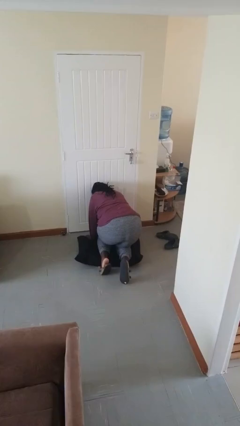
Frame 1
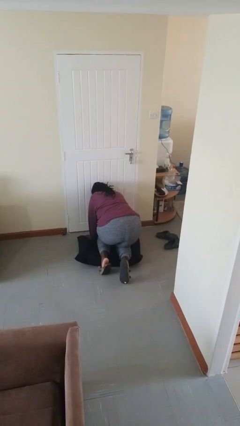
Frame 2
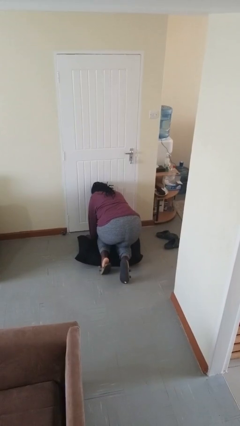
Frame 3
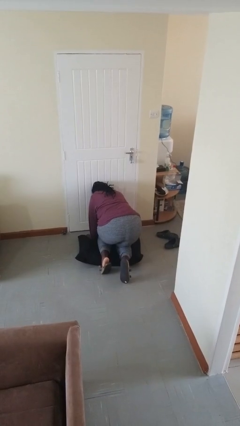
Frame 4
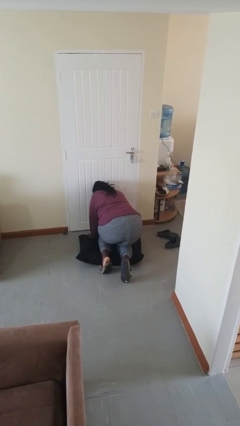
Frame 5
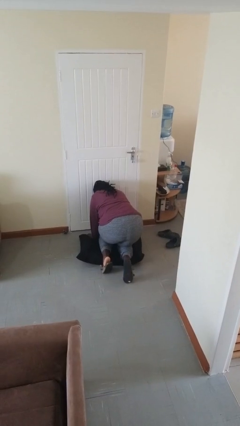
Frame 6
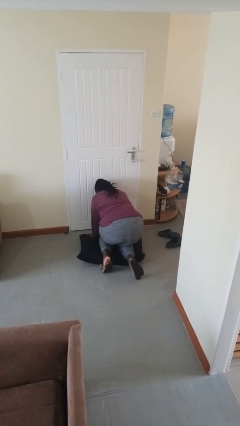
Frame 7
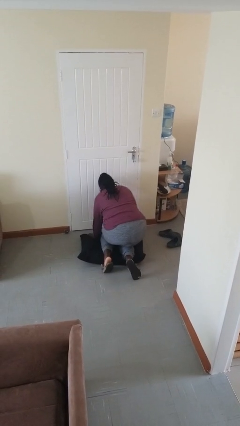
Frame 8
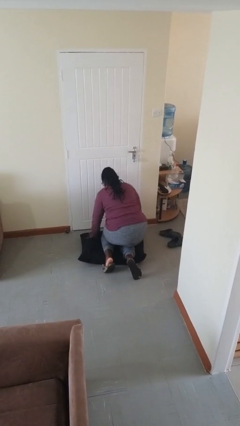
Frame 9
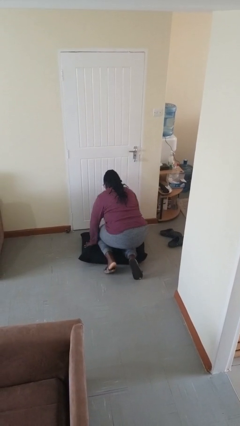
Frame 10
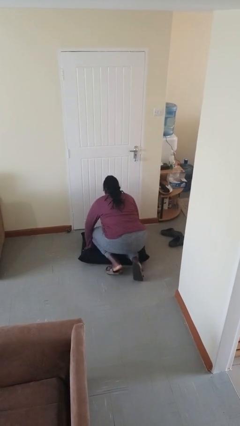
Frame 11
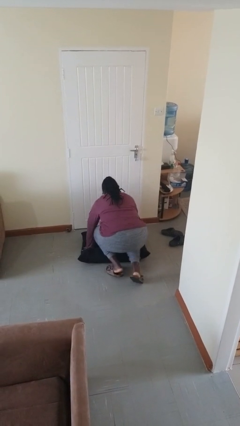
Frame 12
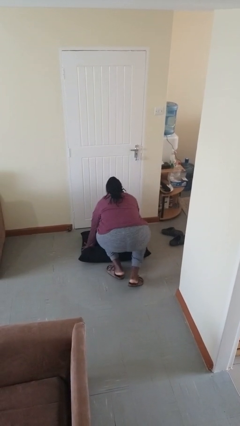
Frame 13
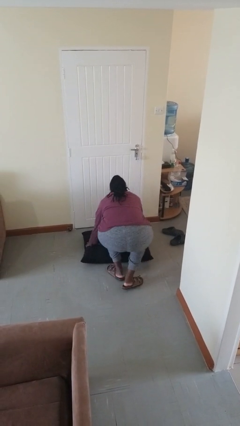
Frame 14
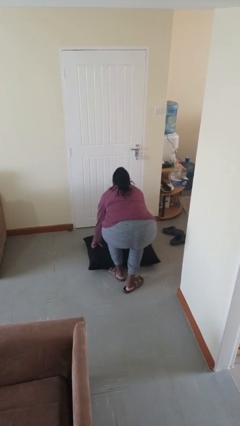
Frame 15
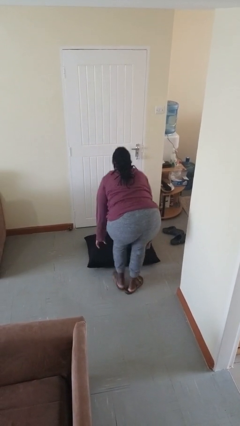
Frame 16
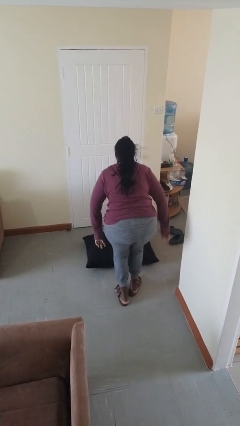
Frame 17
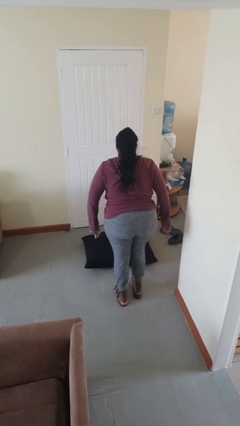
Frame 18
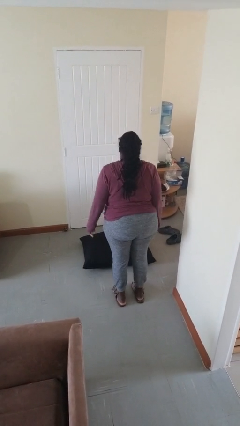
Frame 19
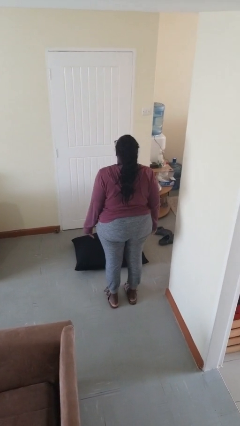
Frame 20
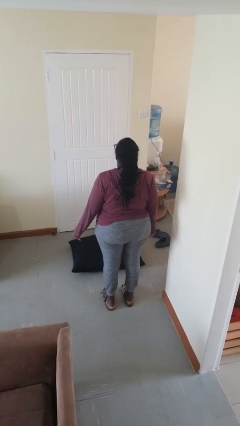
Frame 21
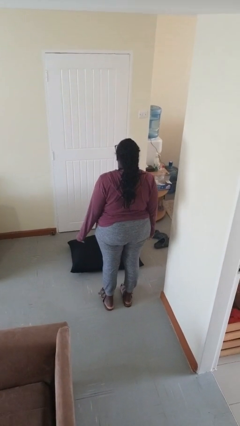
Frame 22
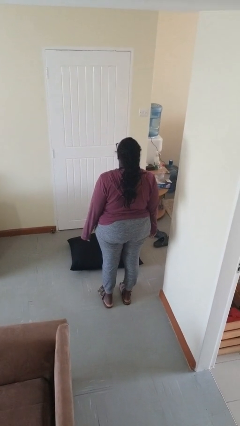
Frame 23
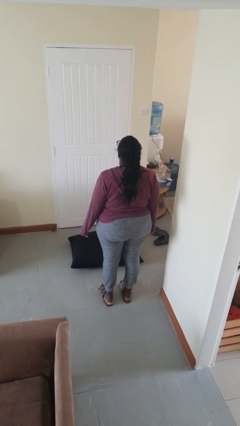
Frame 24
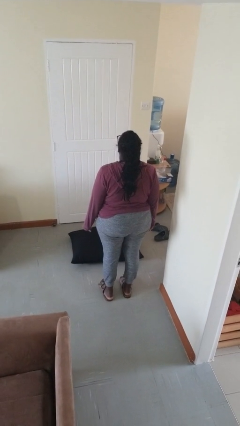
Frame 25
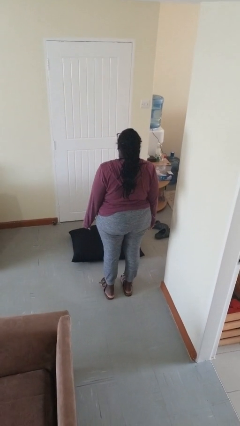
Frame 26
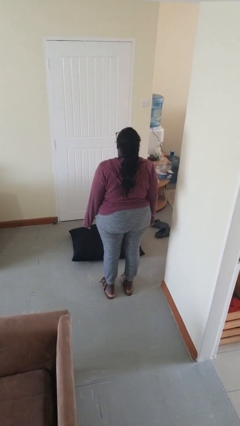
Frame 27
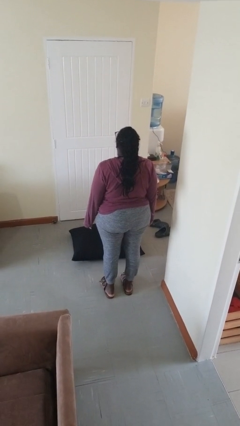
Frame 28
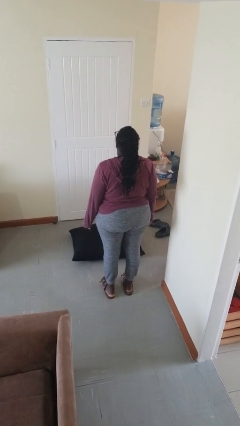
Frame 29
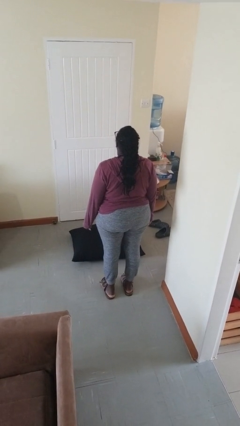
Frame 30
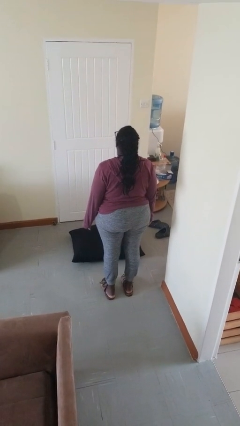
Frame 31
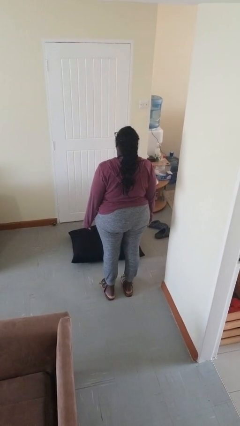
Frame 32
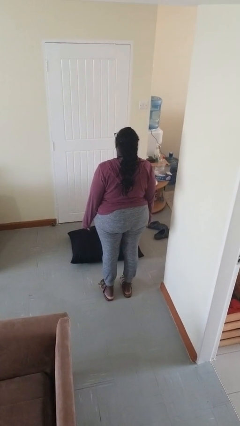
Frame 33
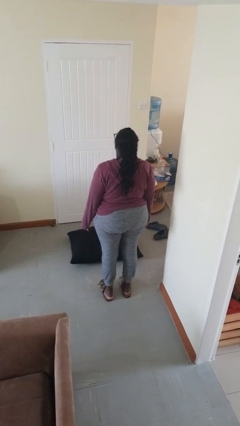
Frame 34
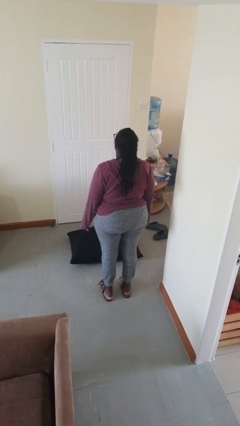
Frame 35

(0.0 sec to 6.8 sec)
person stands up from floor

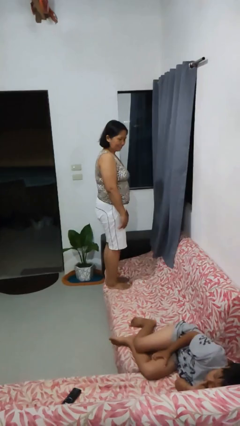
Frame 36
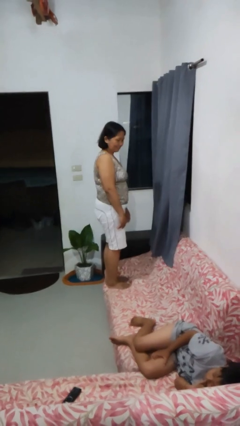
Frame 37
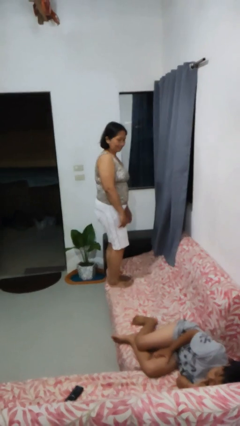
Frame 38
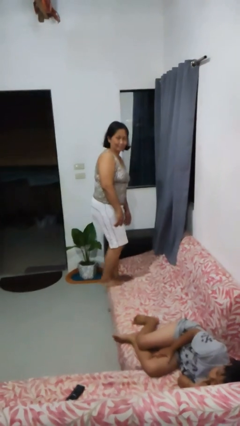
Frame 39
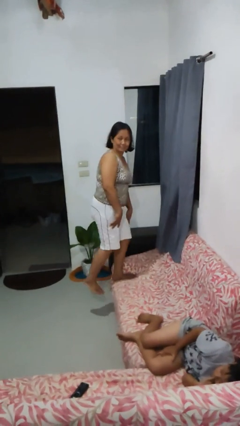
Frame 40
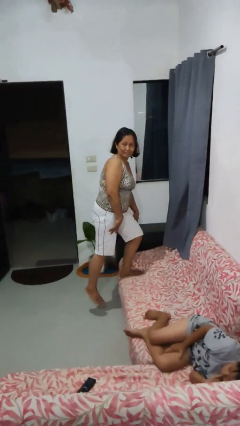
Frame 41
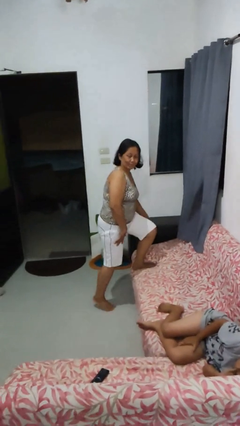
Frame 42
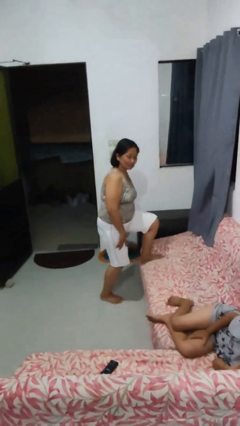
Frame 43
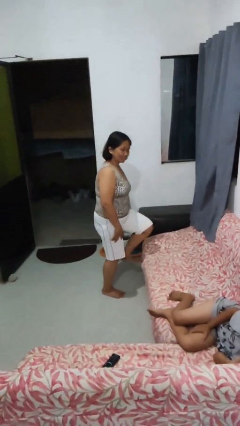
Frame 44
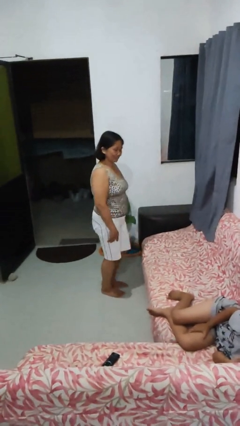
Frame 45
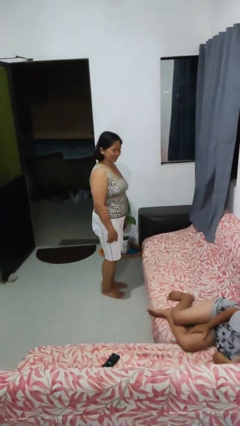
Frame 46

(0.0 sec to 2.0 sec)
person climbs off couch

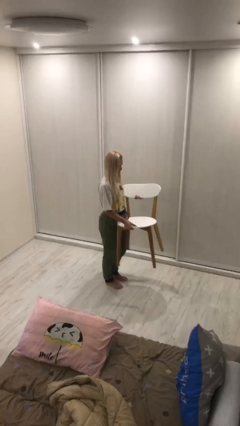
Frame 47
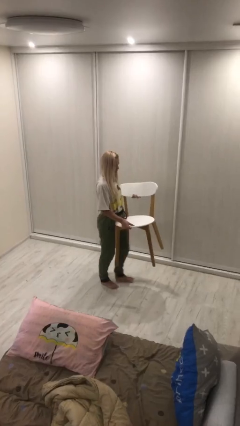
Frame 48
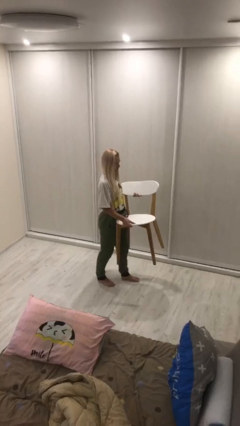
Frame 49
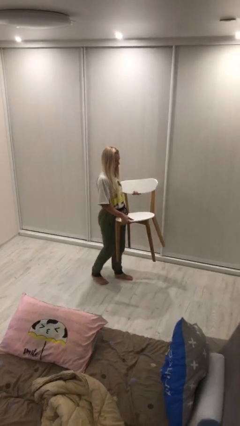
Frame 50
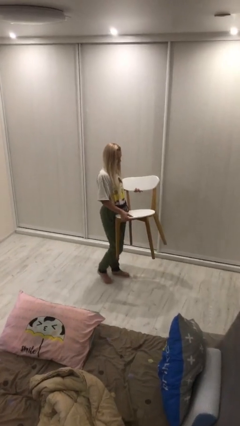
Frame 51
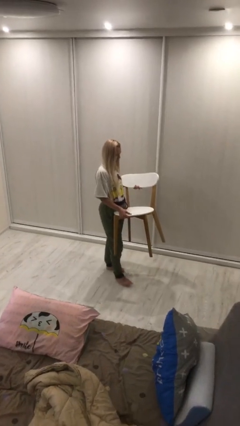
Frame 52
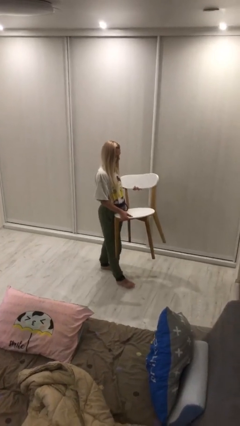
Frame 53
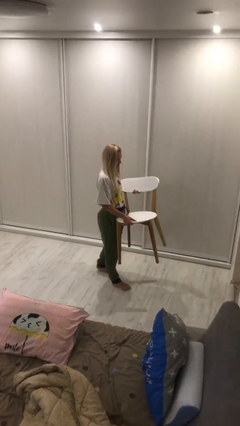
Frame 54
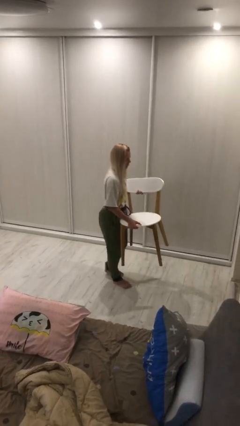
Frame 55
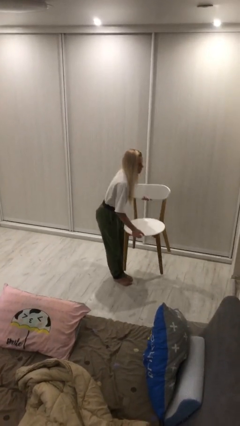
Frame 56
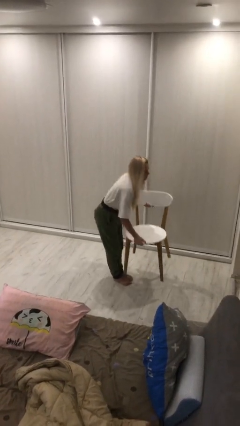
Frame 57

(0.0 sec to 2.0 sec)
person carries heavy object

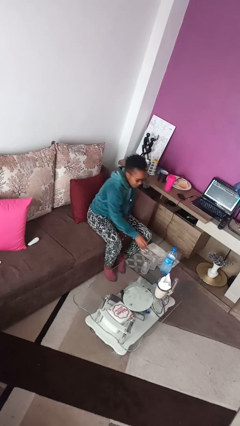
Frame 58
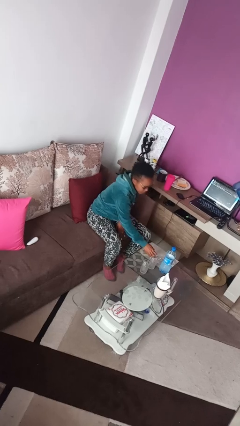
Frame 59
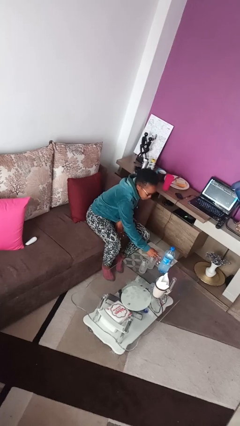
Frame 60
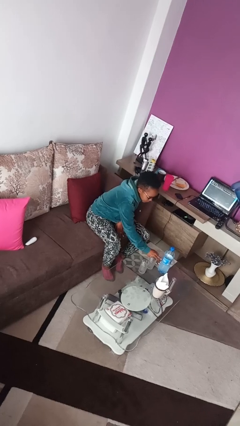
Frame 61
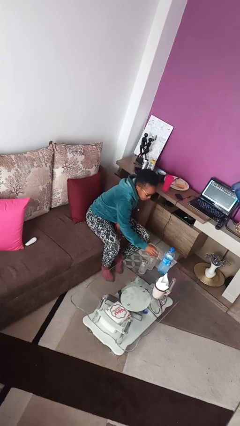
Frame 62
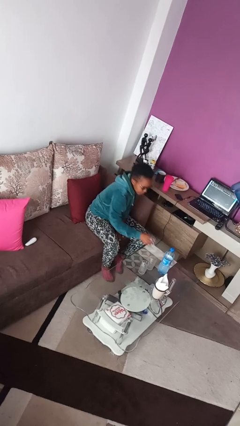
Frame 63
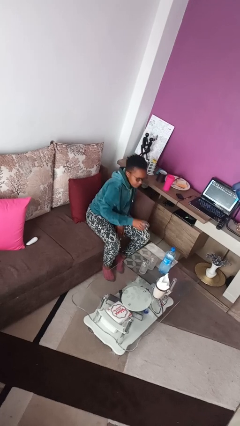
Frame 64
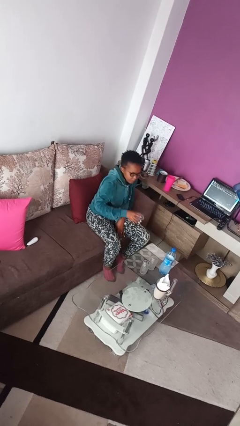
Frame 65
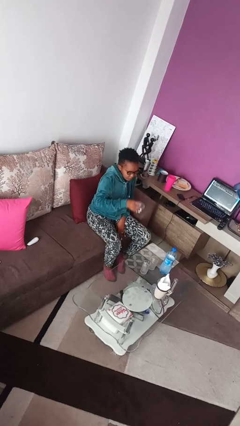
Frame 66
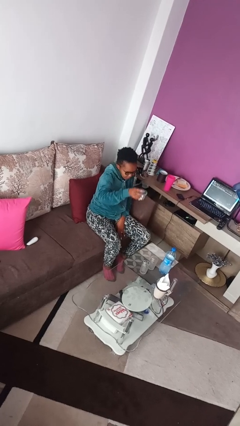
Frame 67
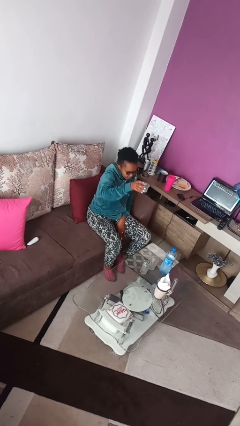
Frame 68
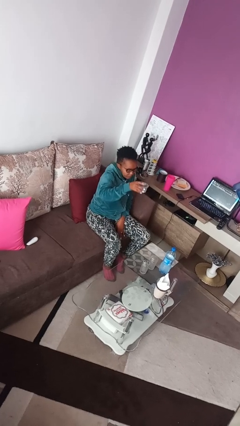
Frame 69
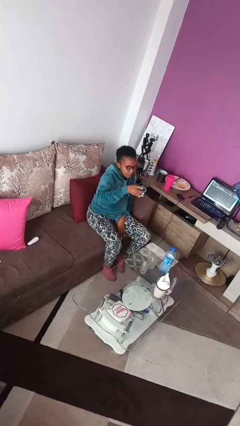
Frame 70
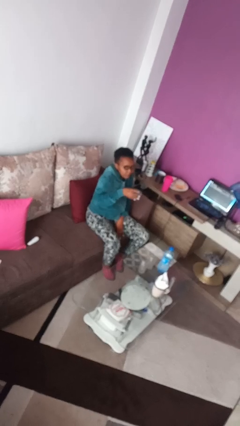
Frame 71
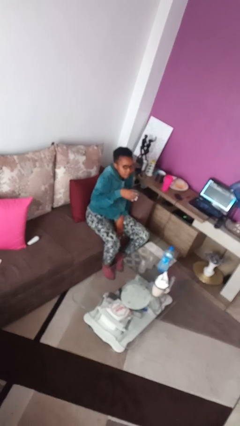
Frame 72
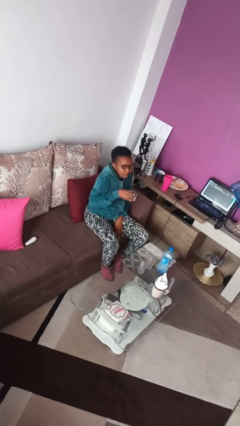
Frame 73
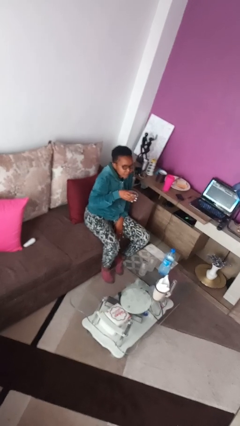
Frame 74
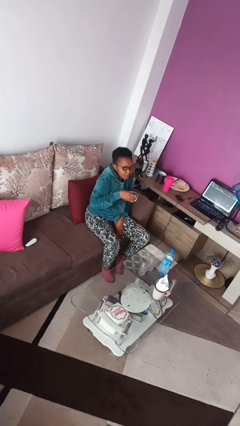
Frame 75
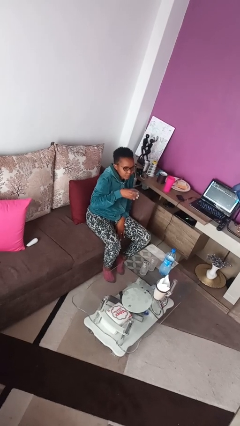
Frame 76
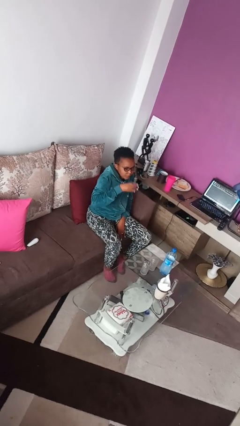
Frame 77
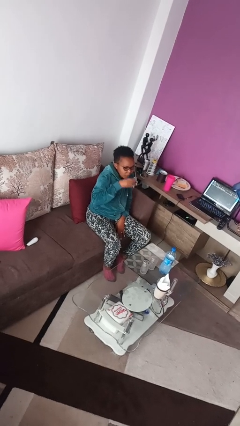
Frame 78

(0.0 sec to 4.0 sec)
person picks up object from table

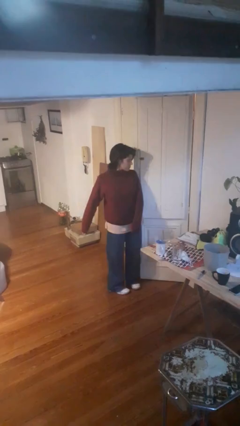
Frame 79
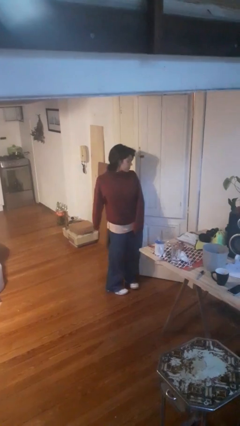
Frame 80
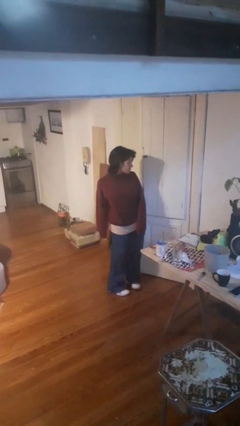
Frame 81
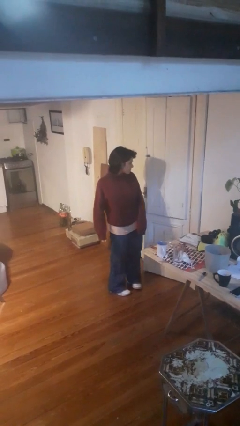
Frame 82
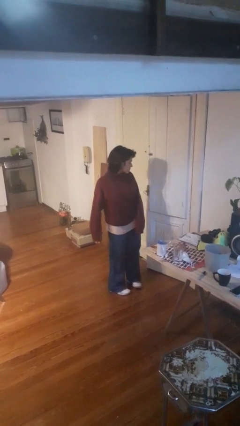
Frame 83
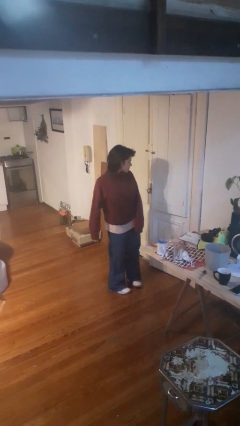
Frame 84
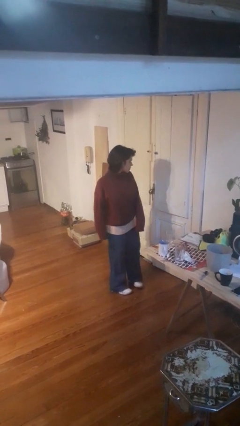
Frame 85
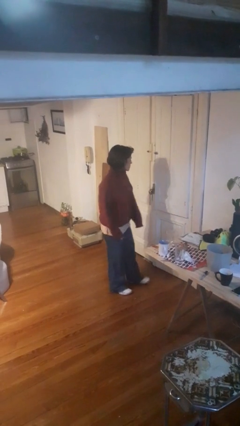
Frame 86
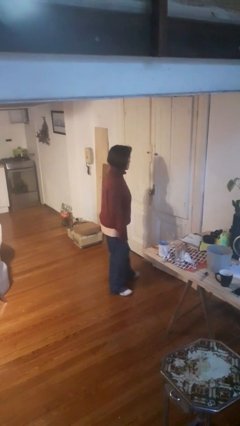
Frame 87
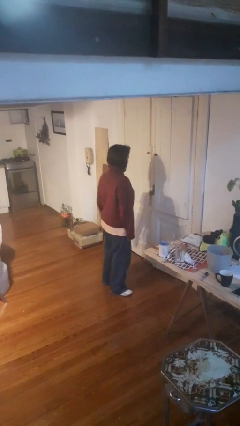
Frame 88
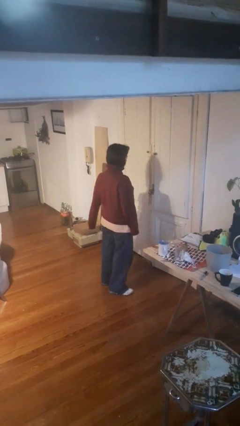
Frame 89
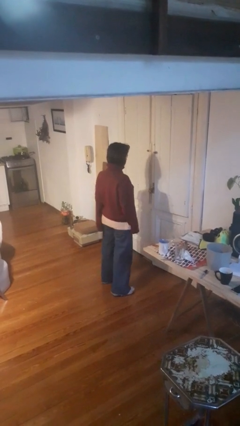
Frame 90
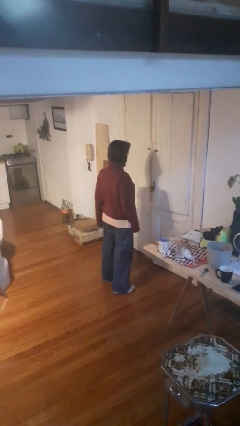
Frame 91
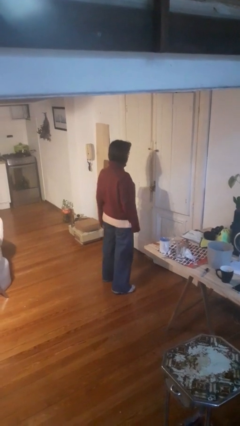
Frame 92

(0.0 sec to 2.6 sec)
person closes door with hip

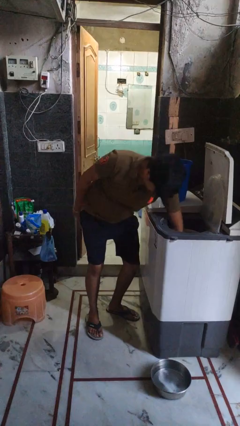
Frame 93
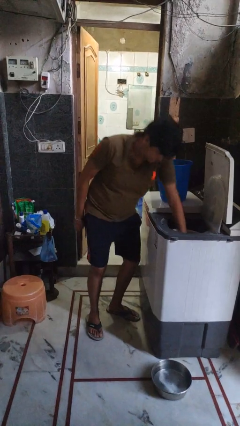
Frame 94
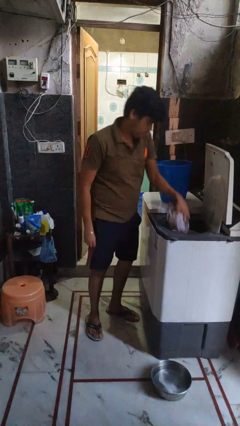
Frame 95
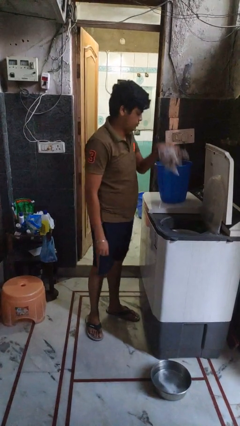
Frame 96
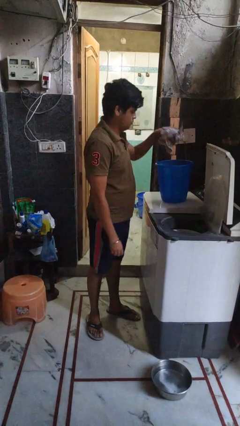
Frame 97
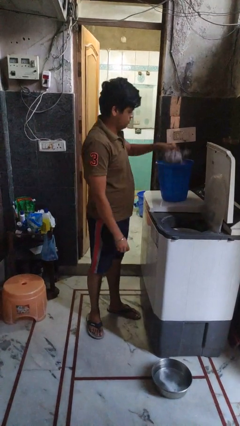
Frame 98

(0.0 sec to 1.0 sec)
person unloads dryer
